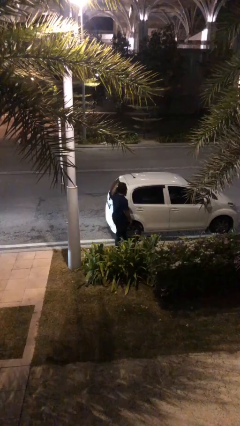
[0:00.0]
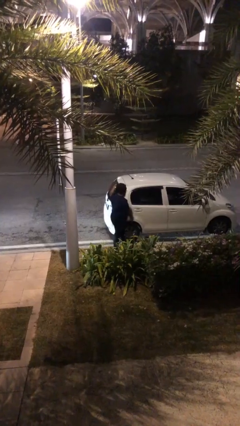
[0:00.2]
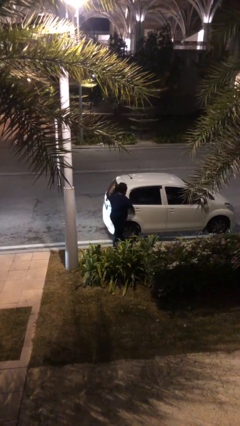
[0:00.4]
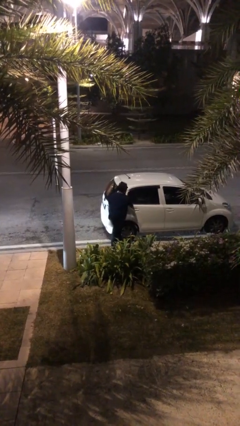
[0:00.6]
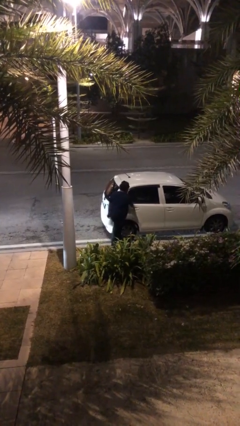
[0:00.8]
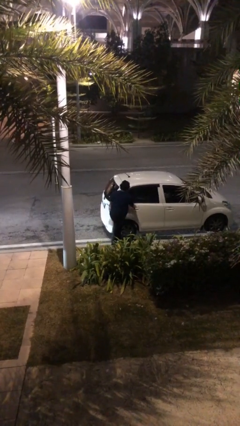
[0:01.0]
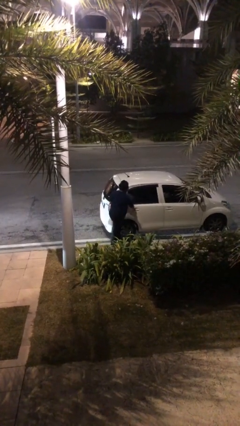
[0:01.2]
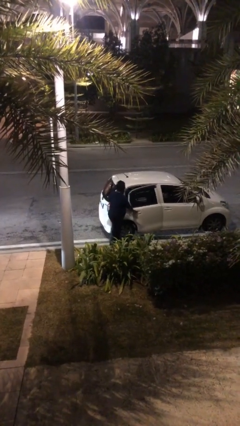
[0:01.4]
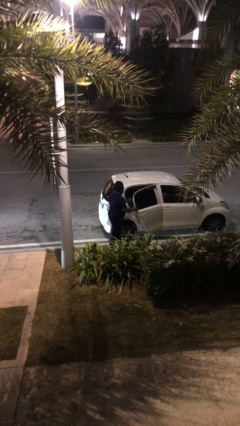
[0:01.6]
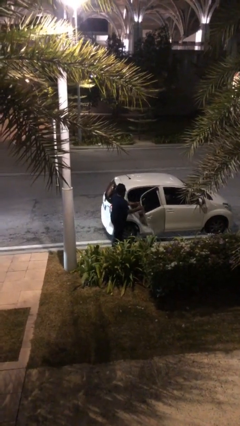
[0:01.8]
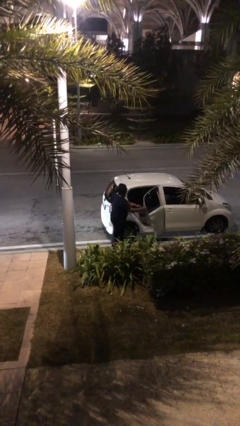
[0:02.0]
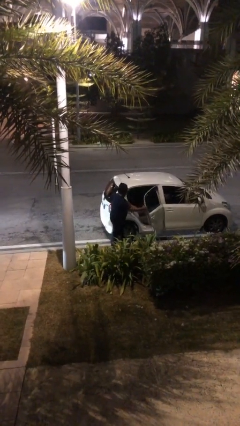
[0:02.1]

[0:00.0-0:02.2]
person opens car door

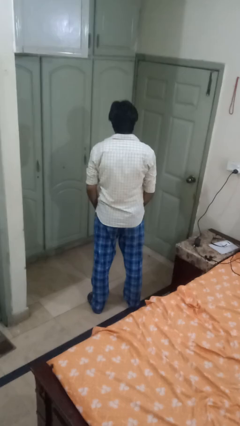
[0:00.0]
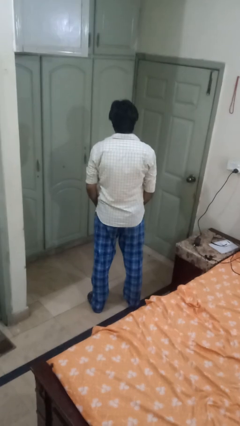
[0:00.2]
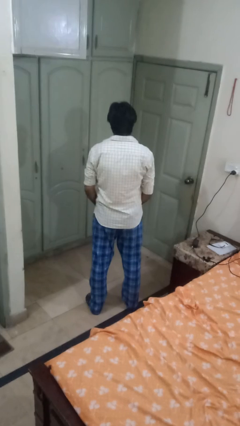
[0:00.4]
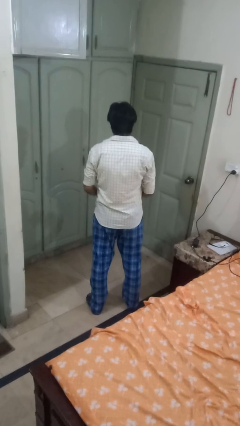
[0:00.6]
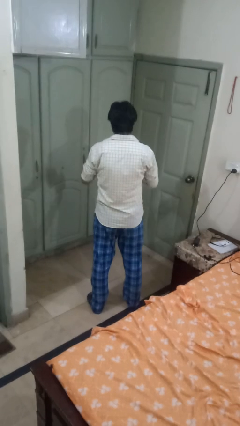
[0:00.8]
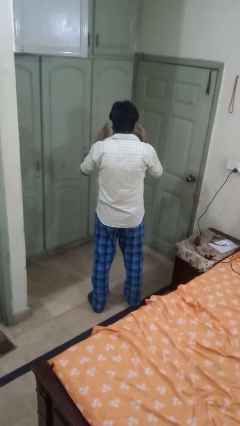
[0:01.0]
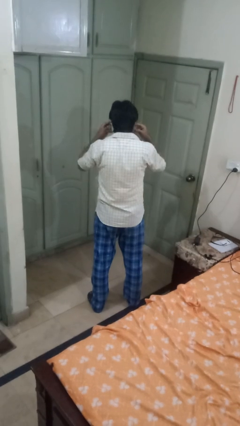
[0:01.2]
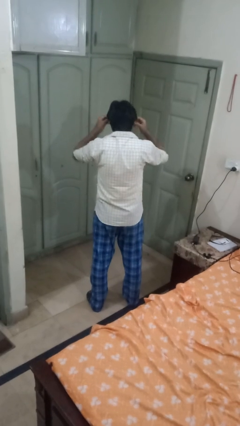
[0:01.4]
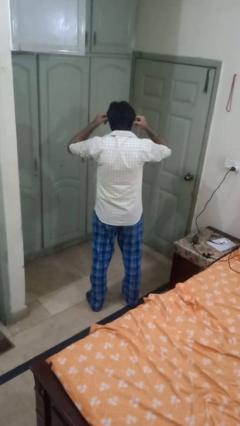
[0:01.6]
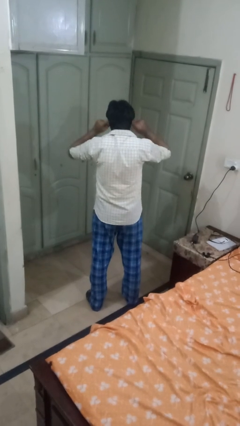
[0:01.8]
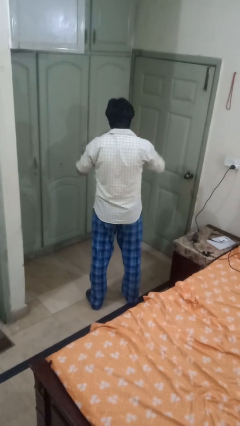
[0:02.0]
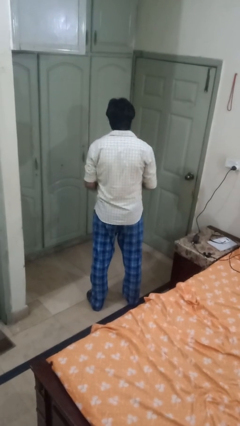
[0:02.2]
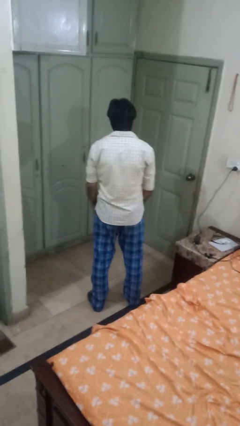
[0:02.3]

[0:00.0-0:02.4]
person puts on facemask

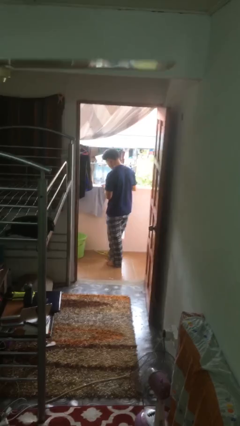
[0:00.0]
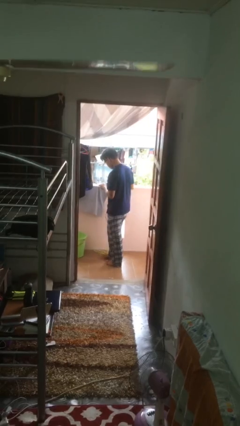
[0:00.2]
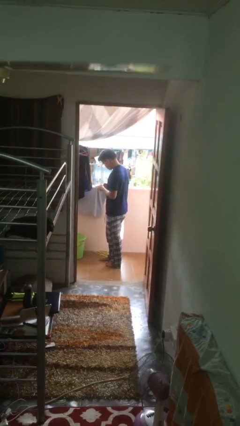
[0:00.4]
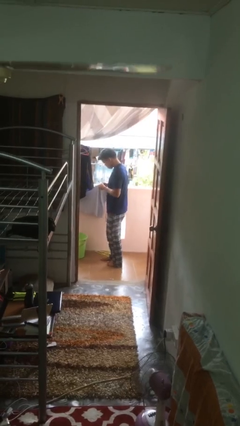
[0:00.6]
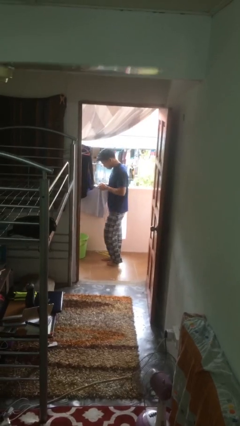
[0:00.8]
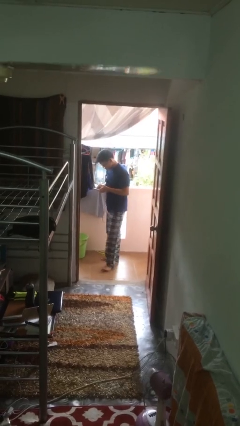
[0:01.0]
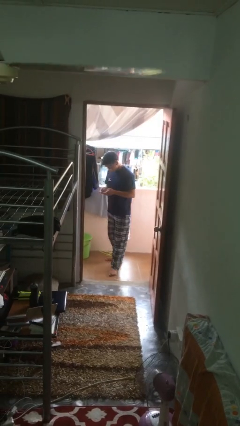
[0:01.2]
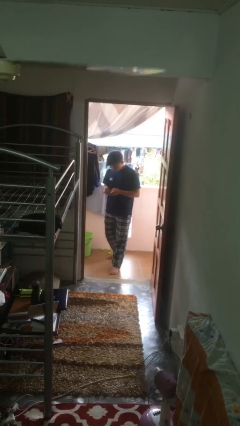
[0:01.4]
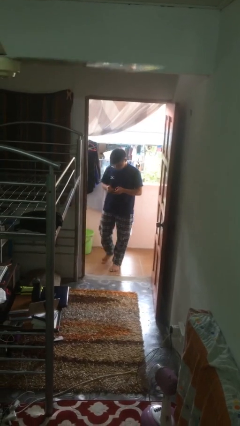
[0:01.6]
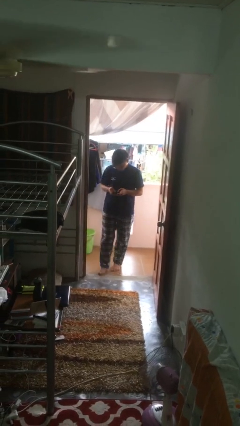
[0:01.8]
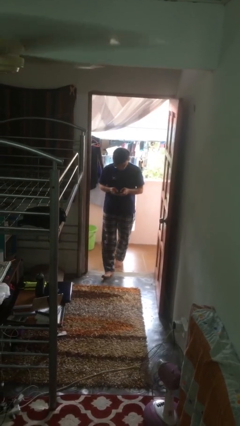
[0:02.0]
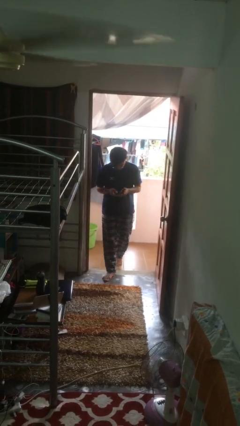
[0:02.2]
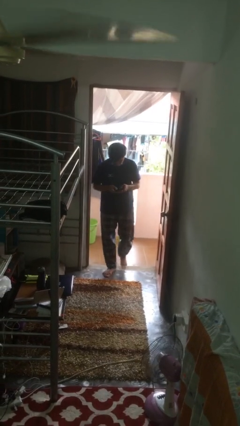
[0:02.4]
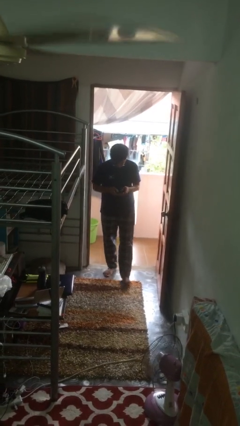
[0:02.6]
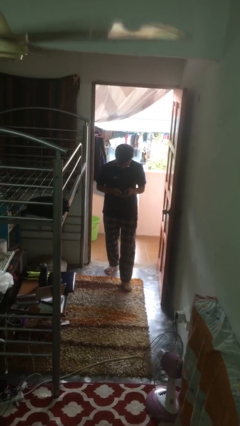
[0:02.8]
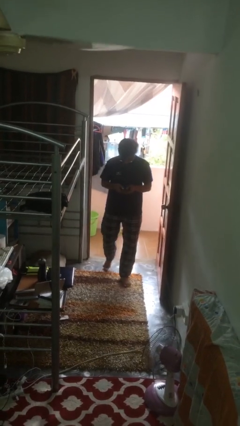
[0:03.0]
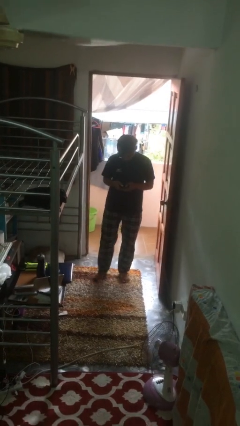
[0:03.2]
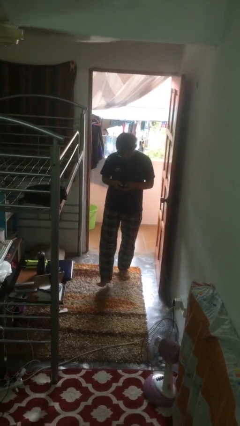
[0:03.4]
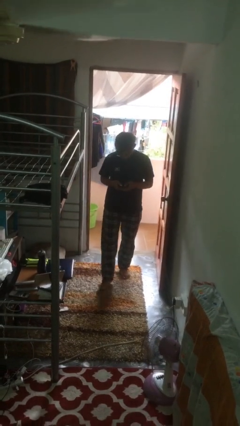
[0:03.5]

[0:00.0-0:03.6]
person enters scene through structure

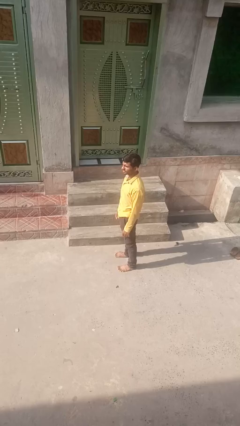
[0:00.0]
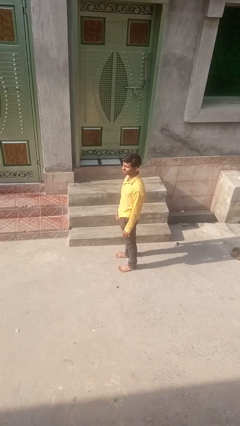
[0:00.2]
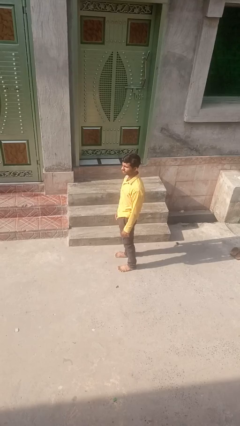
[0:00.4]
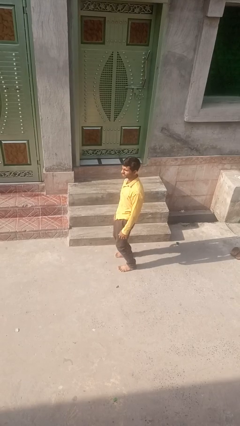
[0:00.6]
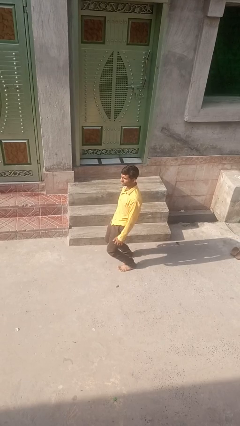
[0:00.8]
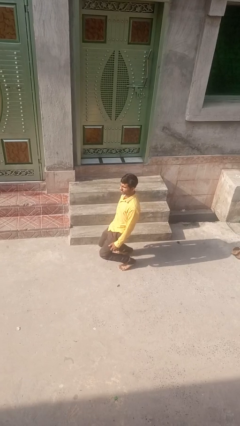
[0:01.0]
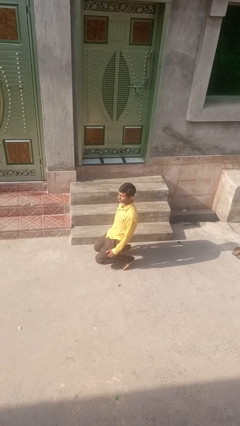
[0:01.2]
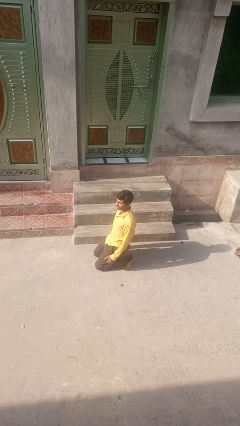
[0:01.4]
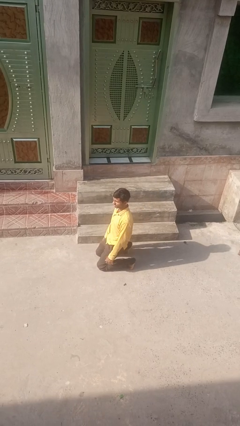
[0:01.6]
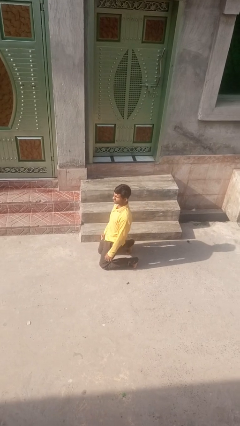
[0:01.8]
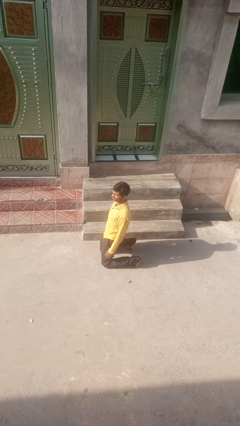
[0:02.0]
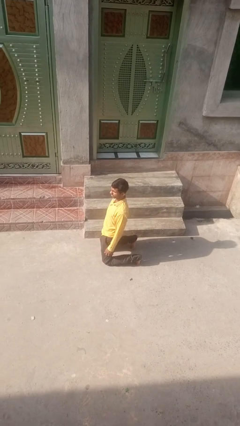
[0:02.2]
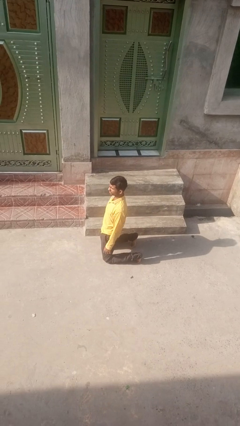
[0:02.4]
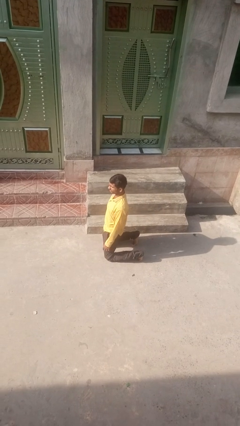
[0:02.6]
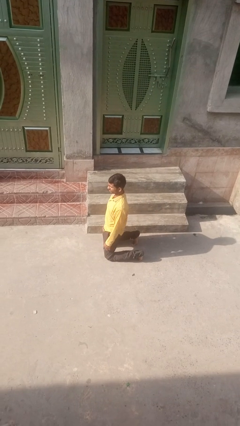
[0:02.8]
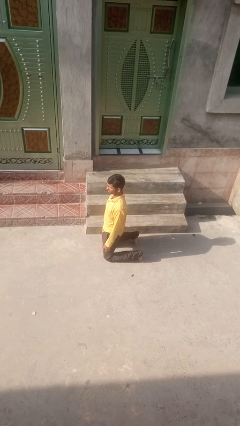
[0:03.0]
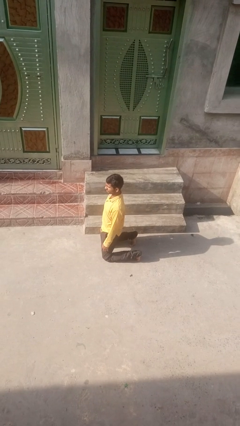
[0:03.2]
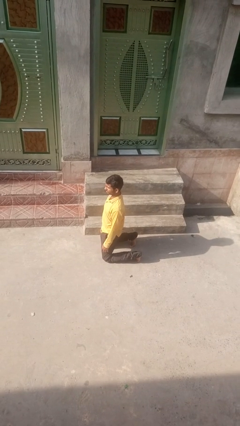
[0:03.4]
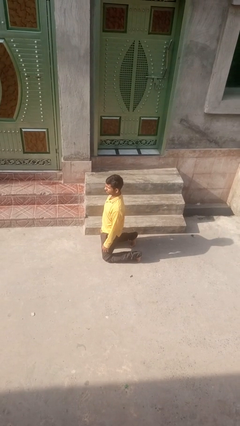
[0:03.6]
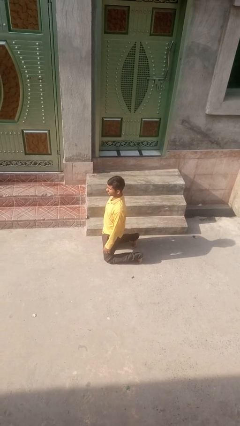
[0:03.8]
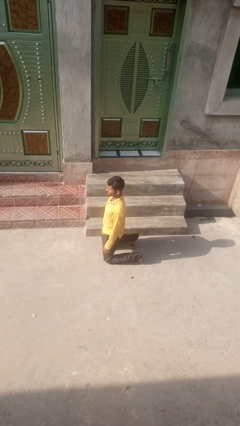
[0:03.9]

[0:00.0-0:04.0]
person kneels

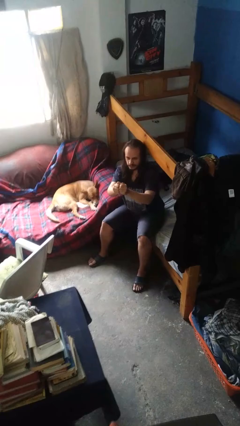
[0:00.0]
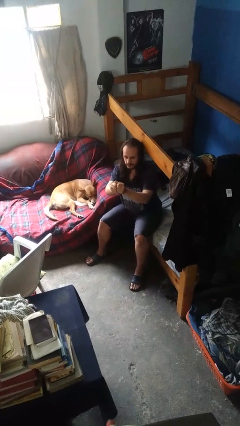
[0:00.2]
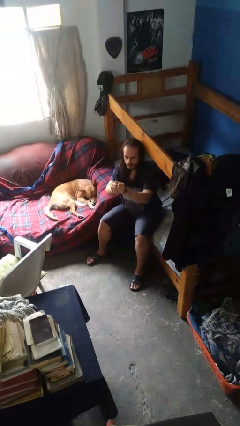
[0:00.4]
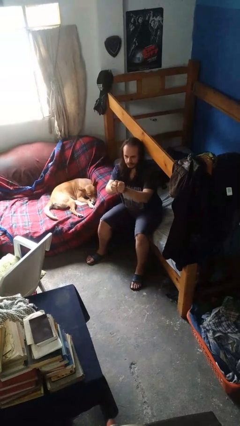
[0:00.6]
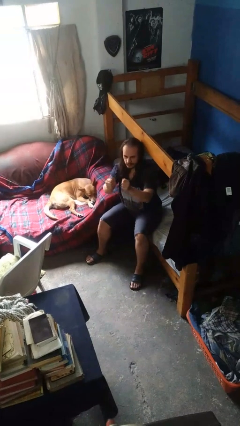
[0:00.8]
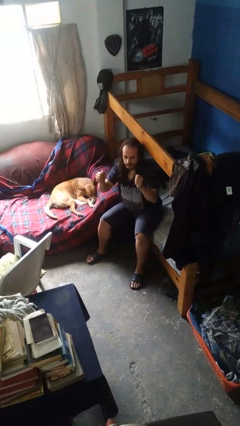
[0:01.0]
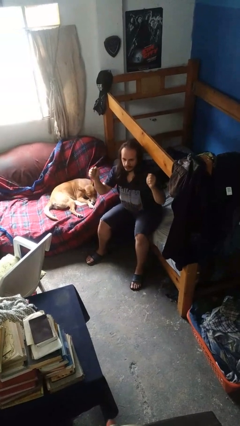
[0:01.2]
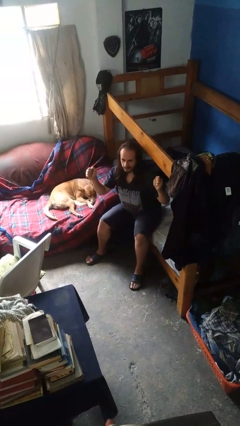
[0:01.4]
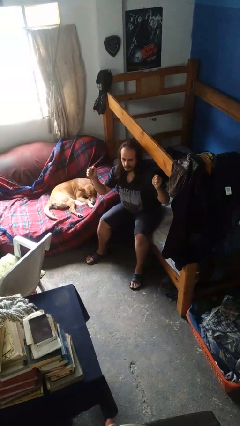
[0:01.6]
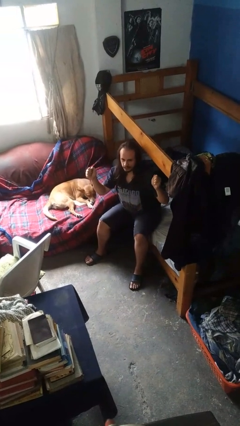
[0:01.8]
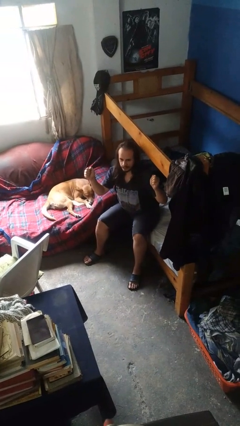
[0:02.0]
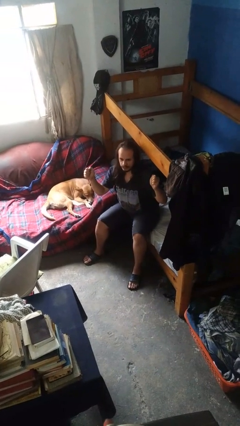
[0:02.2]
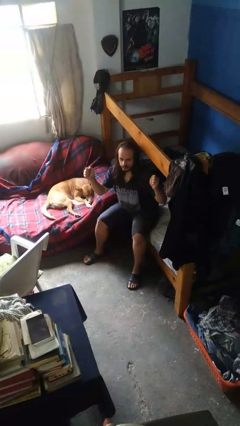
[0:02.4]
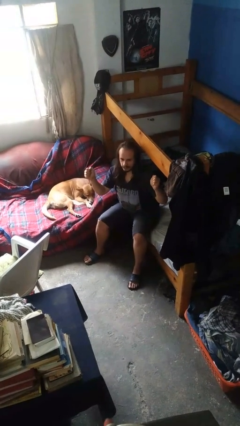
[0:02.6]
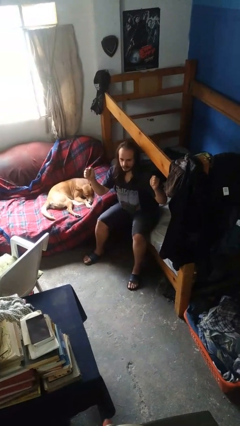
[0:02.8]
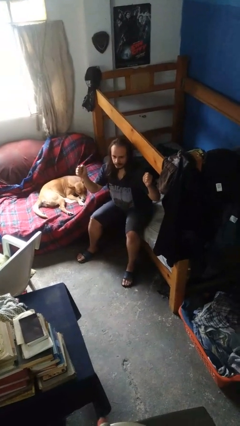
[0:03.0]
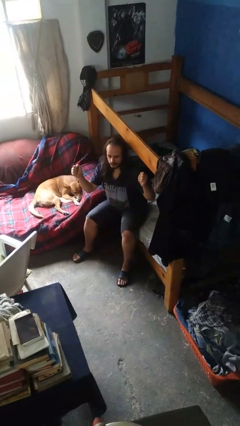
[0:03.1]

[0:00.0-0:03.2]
person gestures zoom in

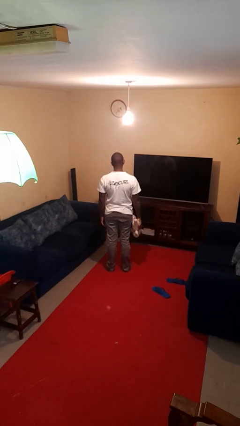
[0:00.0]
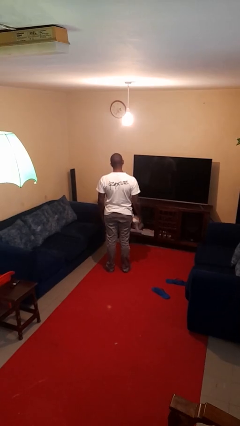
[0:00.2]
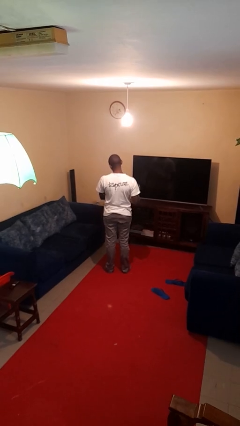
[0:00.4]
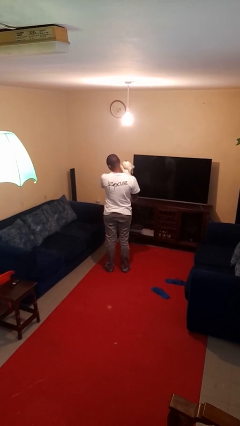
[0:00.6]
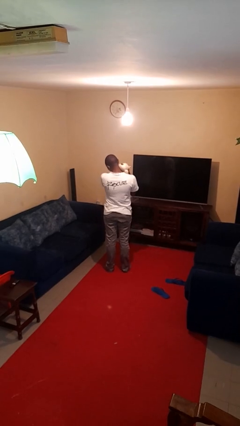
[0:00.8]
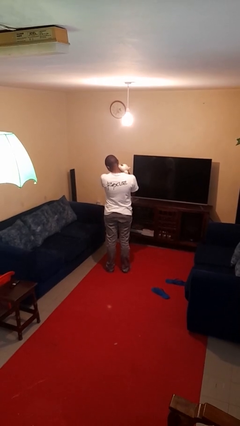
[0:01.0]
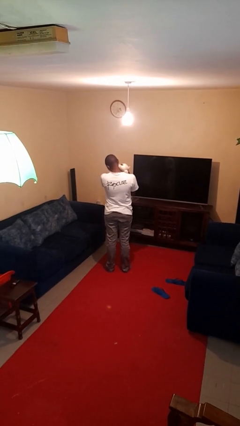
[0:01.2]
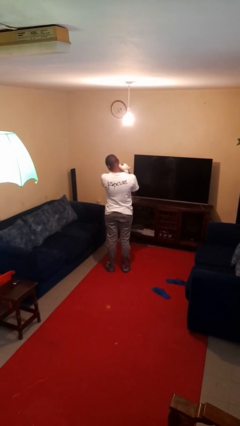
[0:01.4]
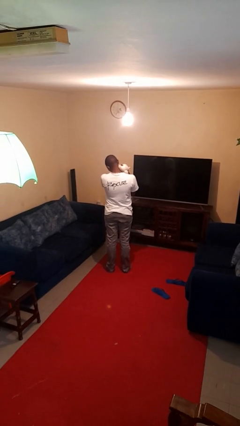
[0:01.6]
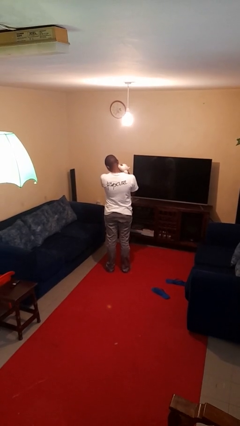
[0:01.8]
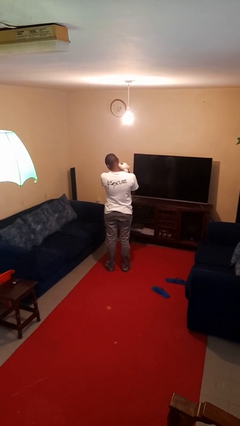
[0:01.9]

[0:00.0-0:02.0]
person hugs stuffed animal
